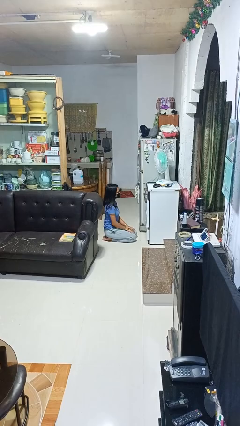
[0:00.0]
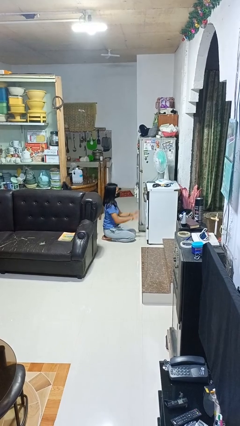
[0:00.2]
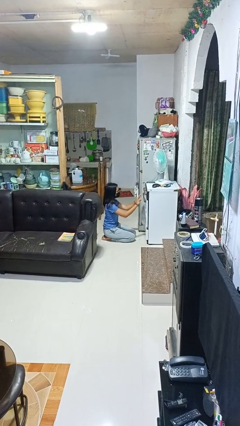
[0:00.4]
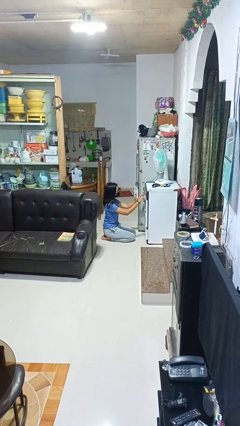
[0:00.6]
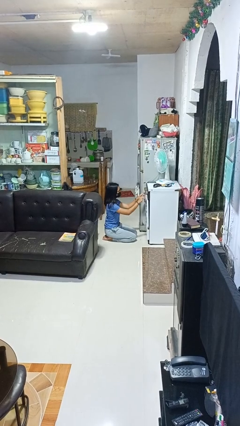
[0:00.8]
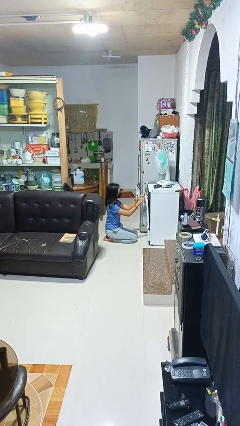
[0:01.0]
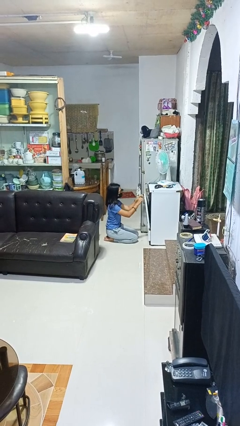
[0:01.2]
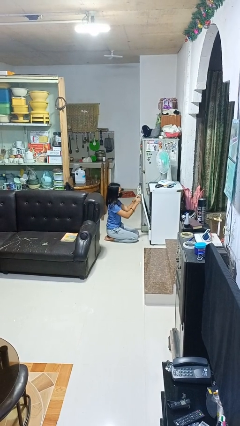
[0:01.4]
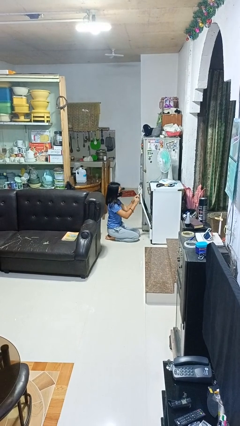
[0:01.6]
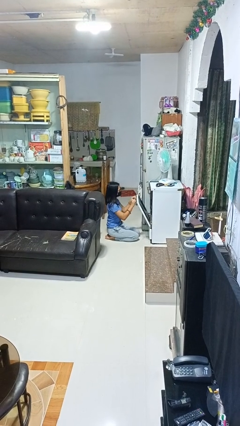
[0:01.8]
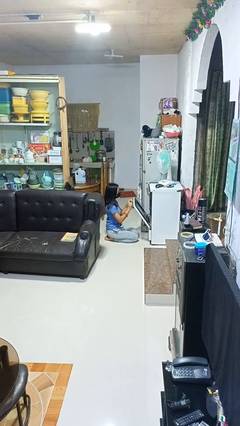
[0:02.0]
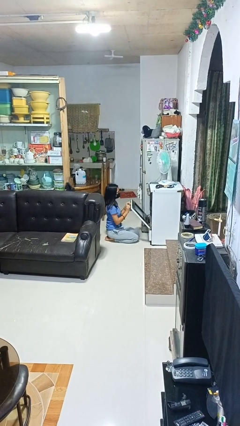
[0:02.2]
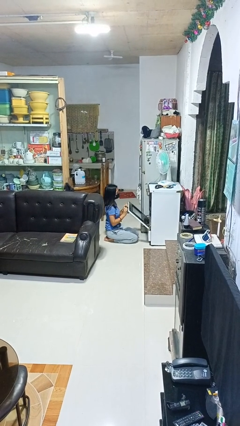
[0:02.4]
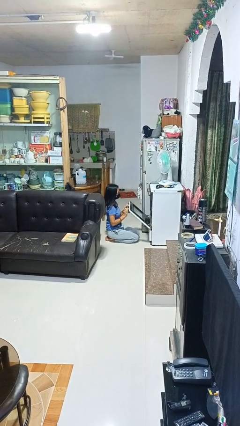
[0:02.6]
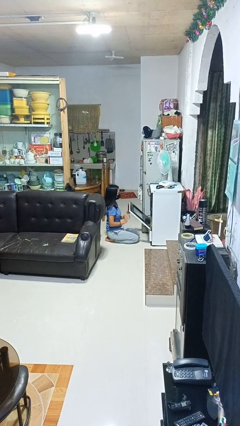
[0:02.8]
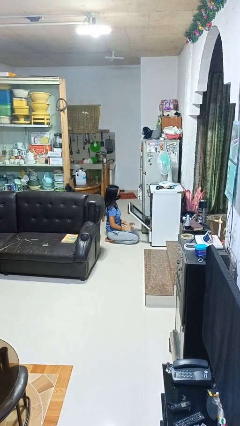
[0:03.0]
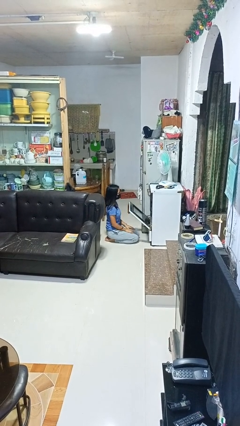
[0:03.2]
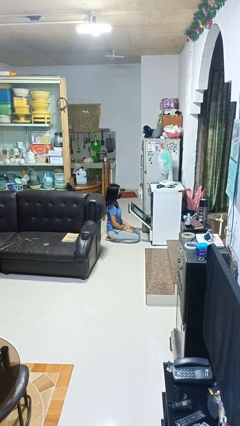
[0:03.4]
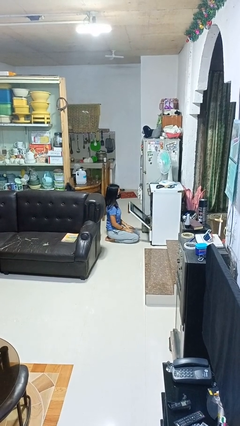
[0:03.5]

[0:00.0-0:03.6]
person opens oven door

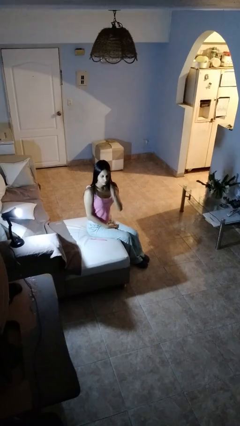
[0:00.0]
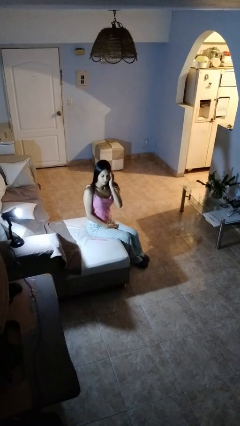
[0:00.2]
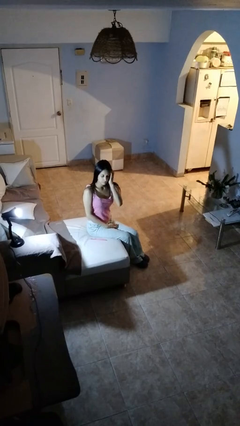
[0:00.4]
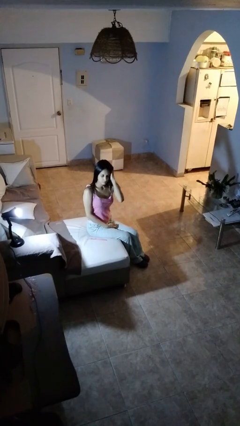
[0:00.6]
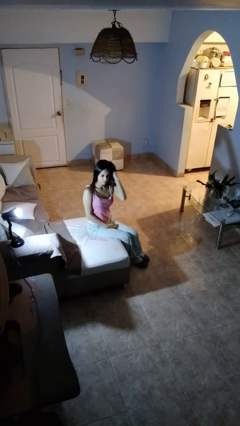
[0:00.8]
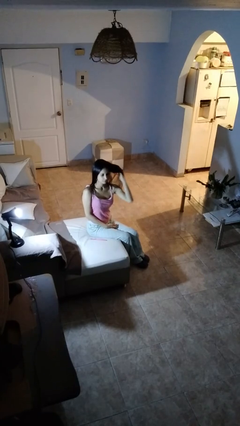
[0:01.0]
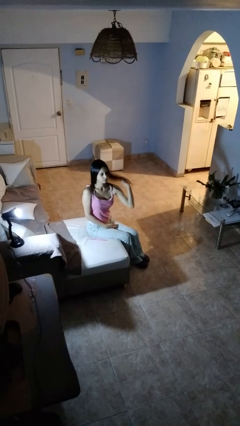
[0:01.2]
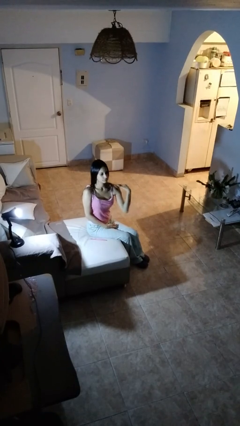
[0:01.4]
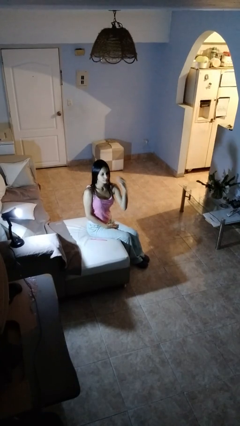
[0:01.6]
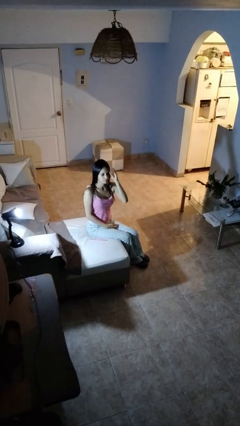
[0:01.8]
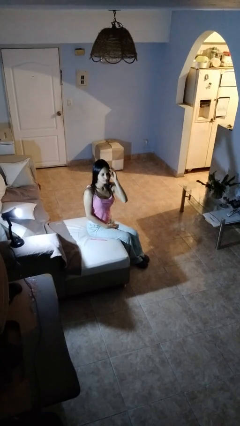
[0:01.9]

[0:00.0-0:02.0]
person strokes hair

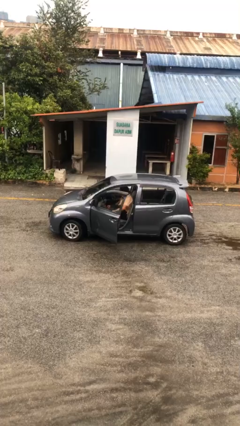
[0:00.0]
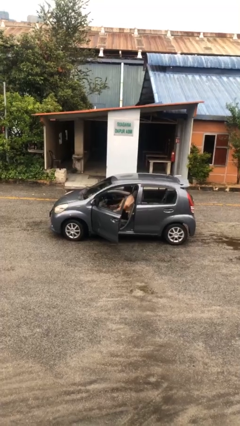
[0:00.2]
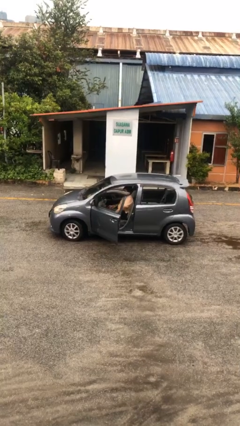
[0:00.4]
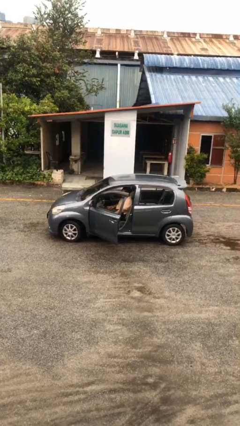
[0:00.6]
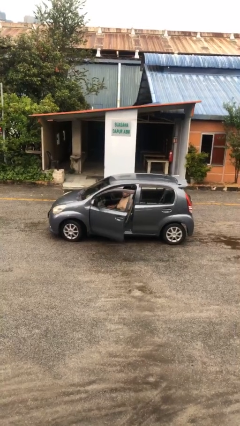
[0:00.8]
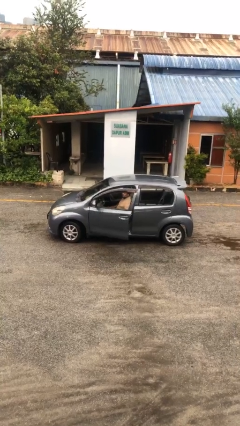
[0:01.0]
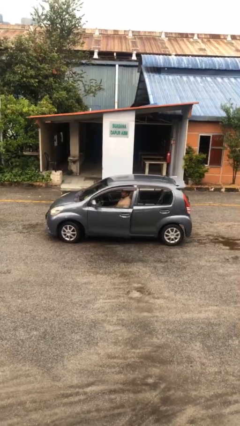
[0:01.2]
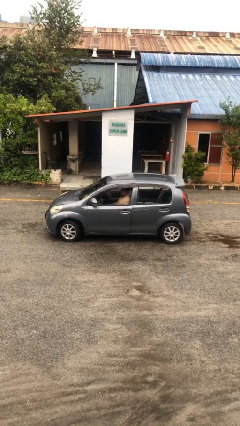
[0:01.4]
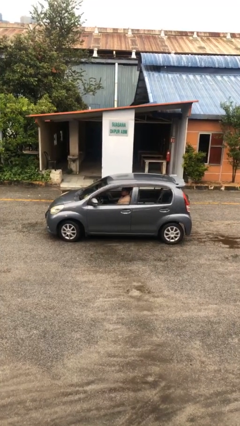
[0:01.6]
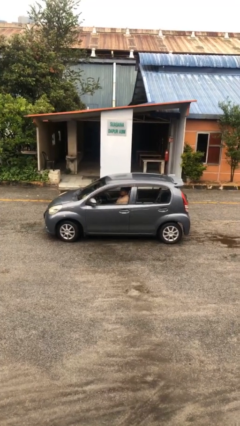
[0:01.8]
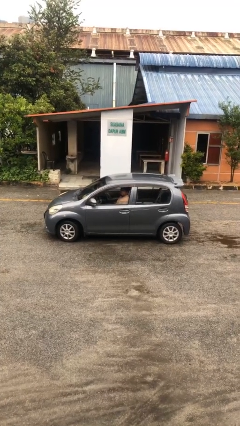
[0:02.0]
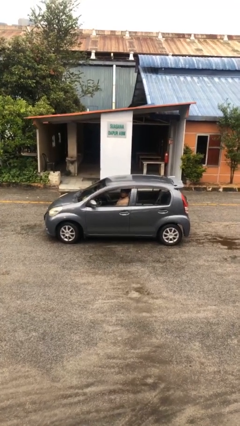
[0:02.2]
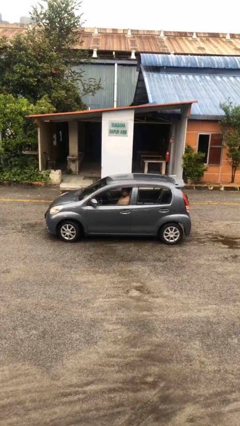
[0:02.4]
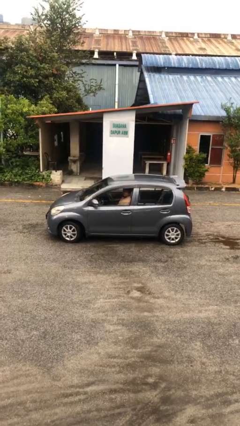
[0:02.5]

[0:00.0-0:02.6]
person closes car door

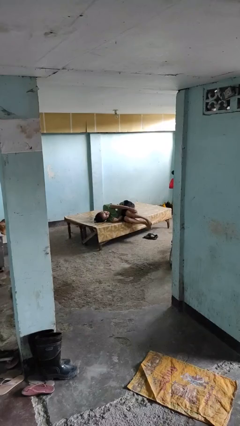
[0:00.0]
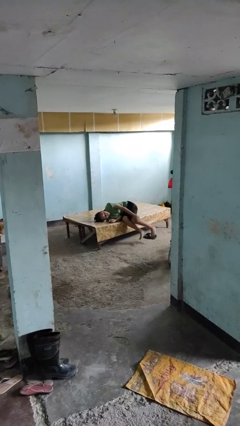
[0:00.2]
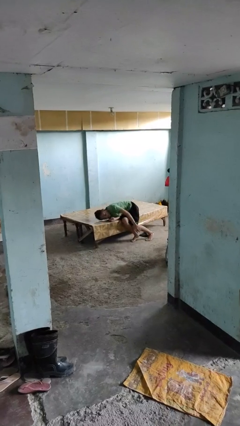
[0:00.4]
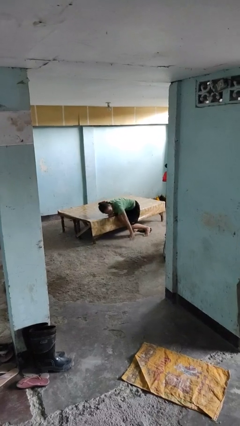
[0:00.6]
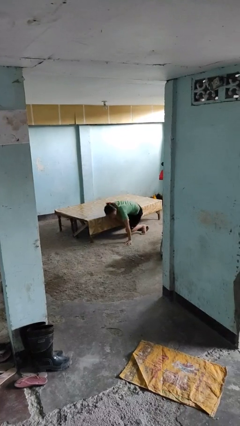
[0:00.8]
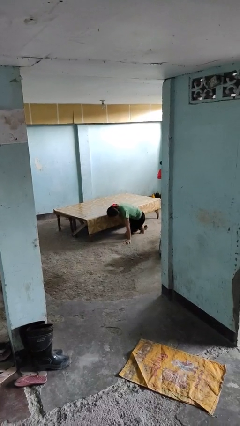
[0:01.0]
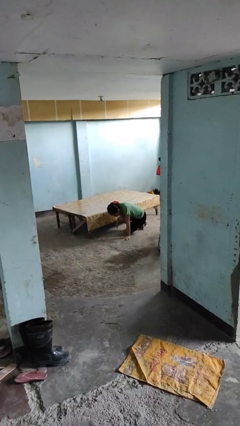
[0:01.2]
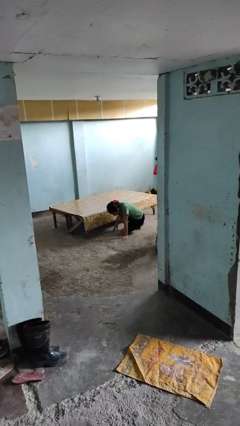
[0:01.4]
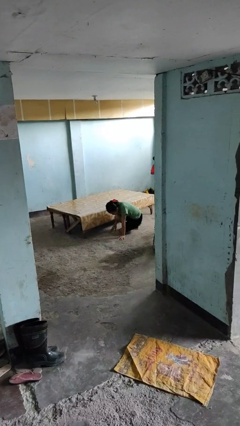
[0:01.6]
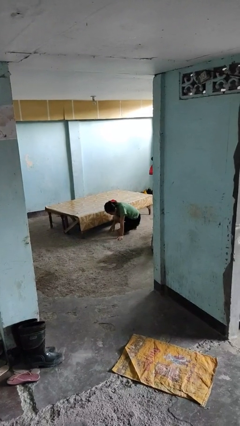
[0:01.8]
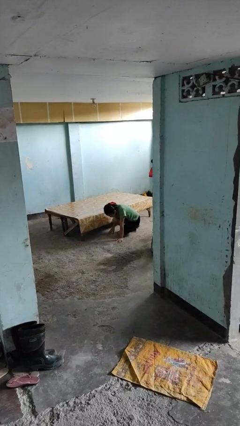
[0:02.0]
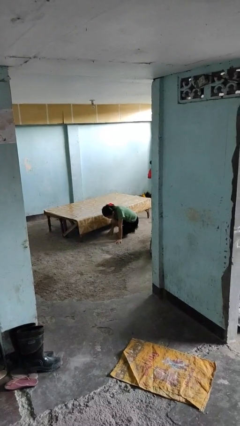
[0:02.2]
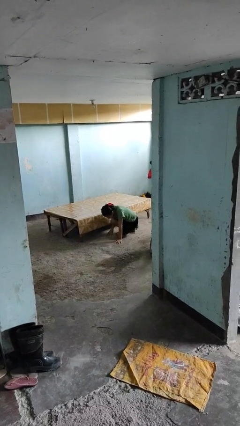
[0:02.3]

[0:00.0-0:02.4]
person falls from bed

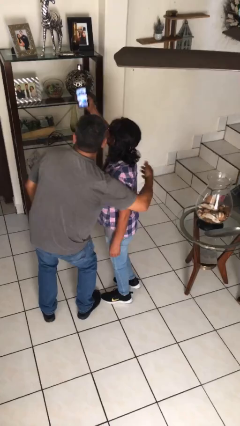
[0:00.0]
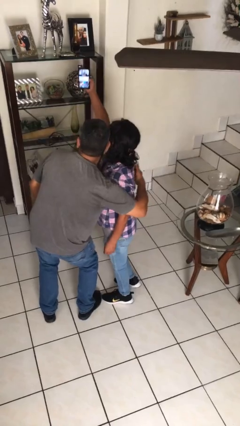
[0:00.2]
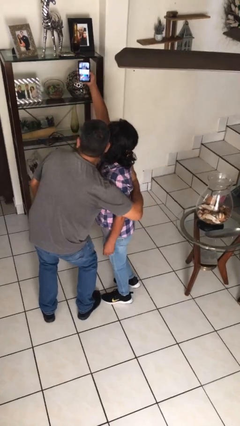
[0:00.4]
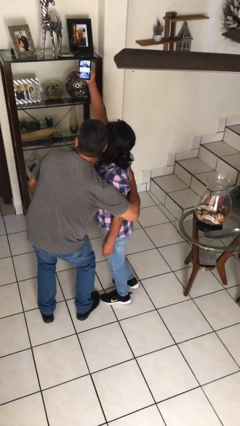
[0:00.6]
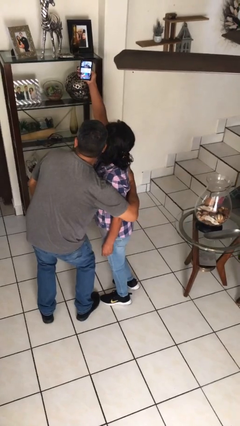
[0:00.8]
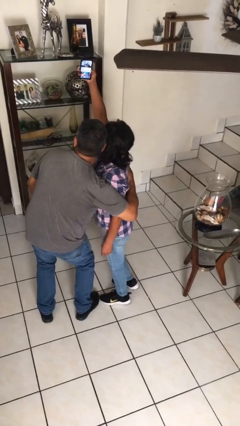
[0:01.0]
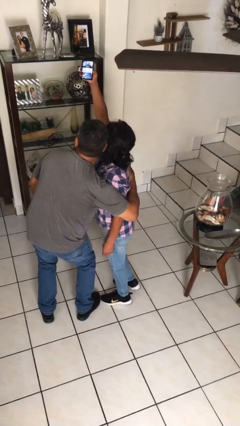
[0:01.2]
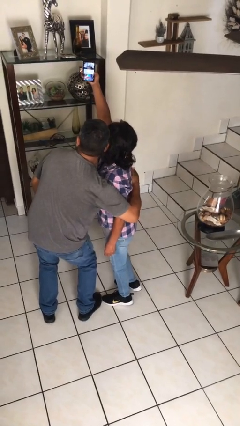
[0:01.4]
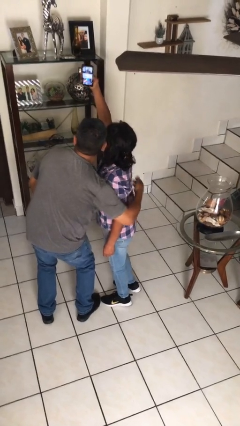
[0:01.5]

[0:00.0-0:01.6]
person takes selfie with person

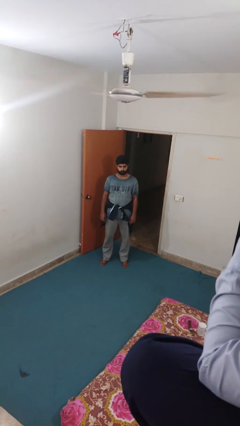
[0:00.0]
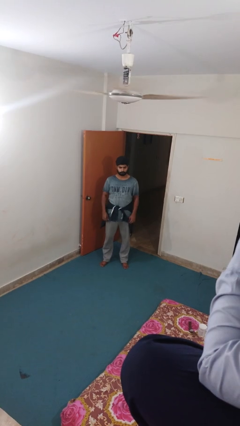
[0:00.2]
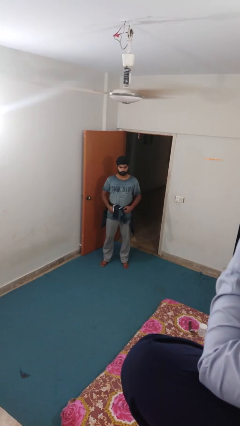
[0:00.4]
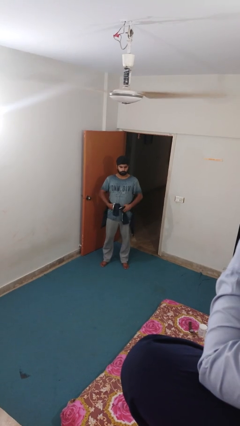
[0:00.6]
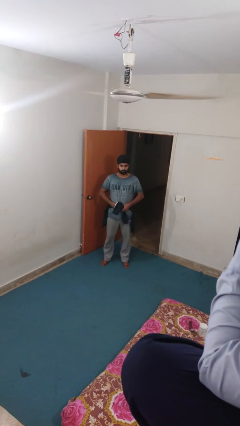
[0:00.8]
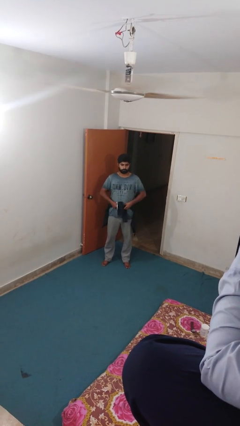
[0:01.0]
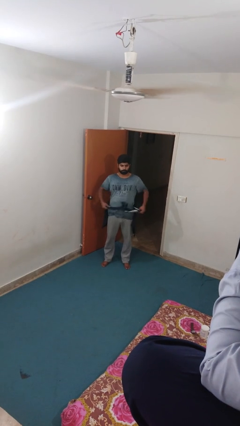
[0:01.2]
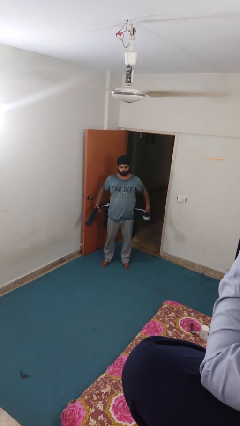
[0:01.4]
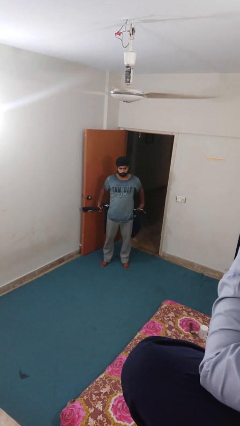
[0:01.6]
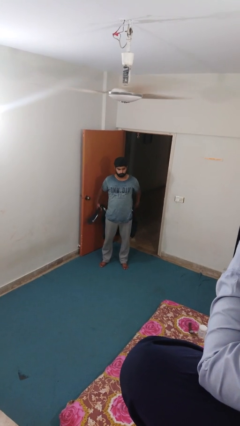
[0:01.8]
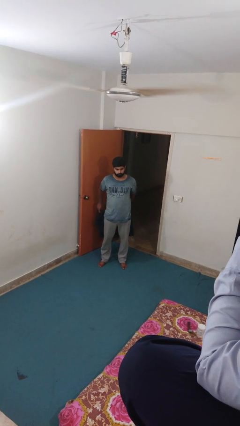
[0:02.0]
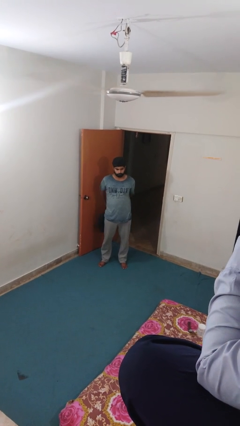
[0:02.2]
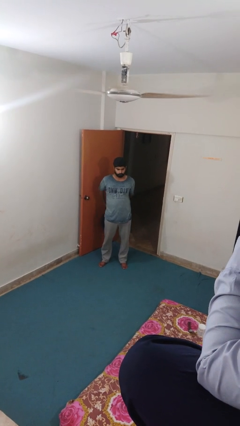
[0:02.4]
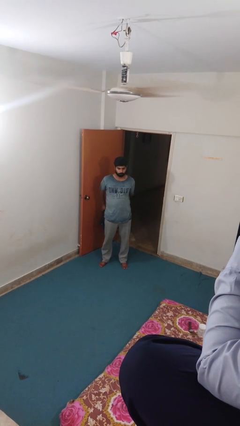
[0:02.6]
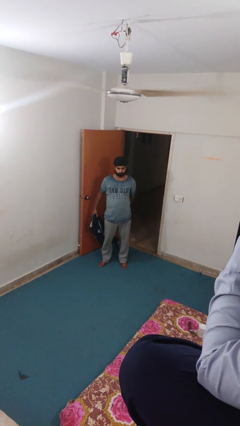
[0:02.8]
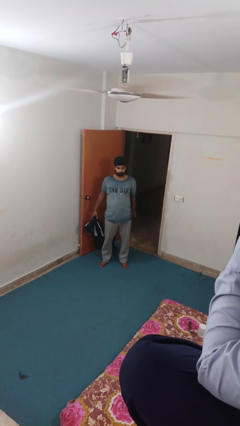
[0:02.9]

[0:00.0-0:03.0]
person unties jacket around waist

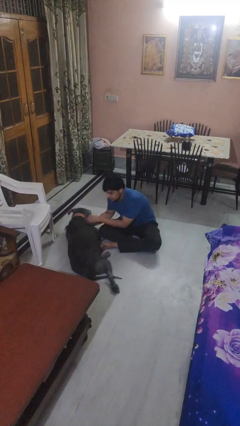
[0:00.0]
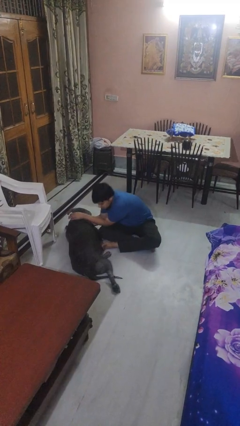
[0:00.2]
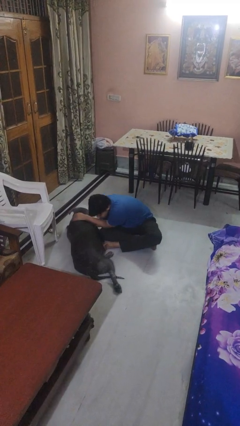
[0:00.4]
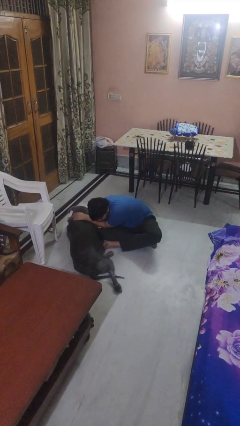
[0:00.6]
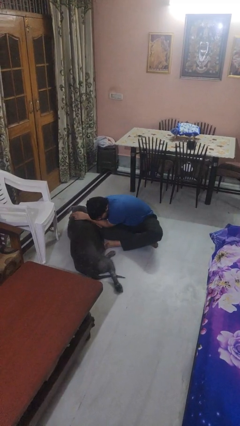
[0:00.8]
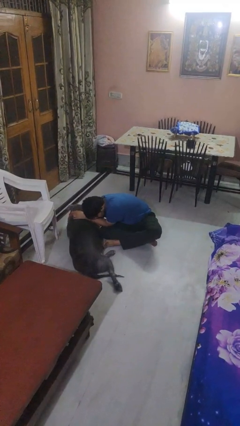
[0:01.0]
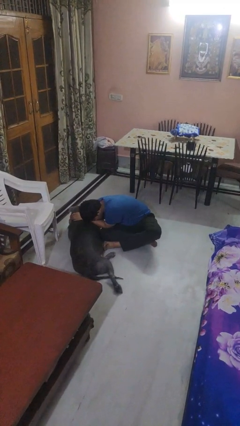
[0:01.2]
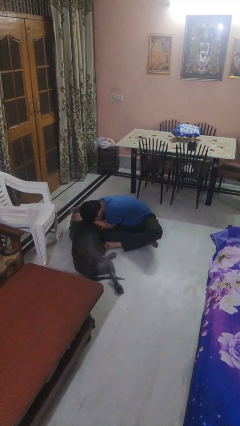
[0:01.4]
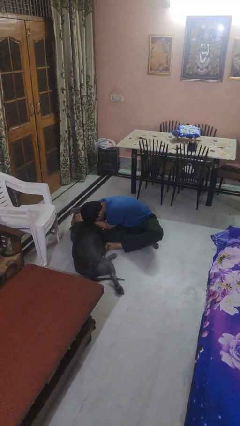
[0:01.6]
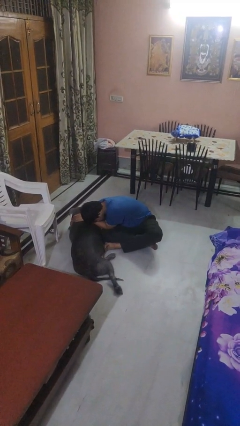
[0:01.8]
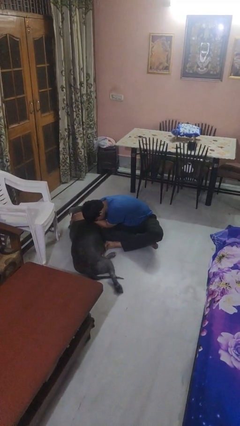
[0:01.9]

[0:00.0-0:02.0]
person hugs dog
